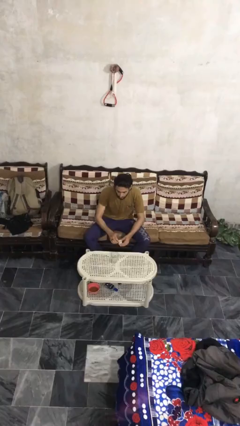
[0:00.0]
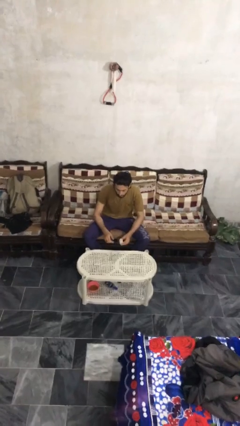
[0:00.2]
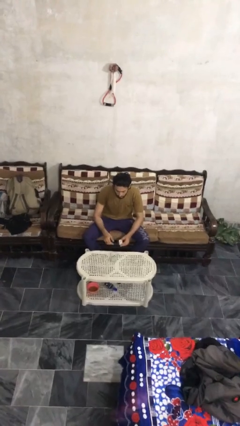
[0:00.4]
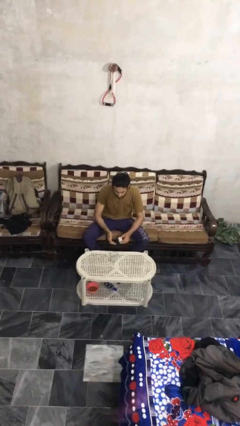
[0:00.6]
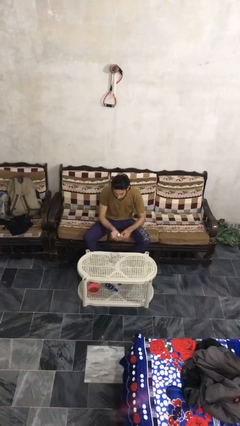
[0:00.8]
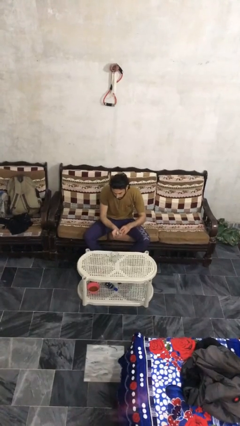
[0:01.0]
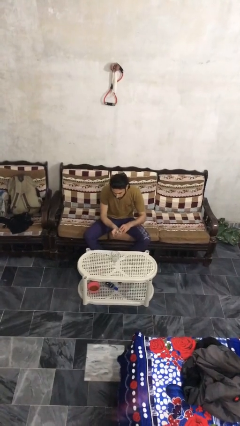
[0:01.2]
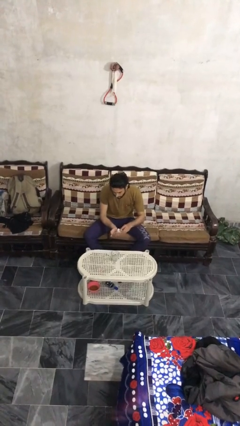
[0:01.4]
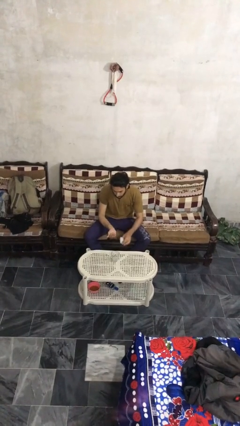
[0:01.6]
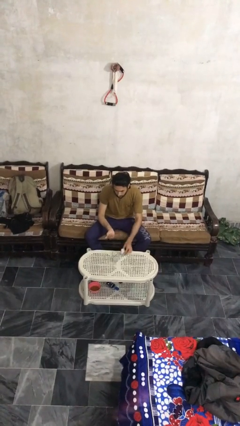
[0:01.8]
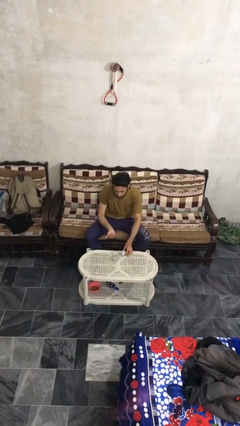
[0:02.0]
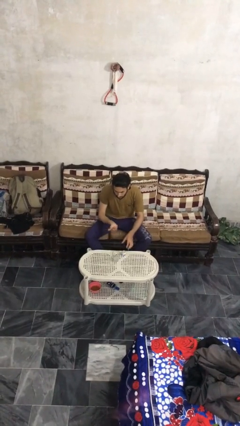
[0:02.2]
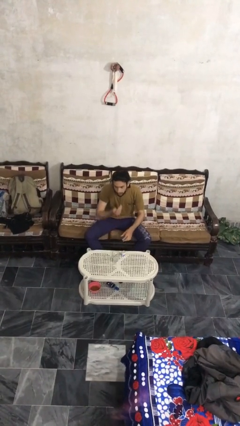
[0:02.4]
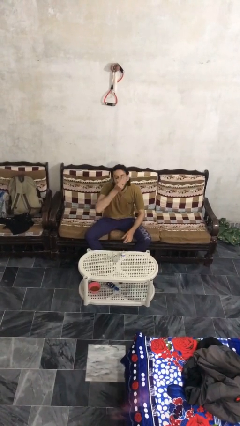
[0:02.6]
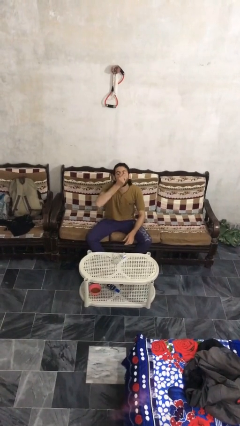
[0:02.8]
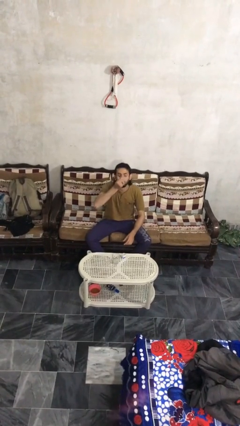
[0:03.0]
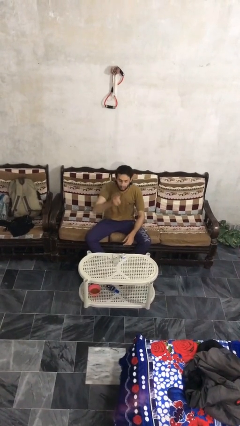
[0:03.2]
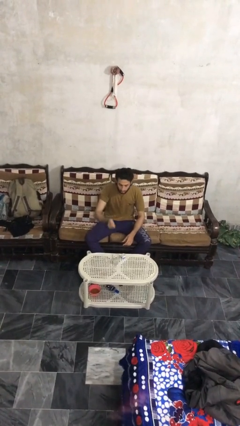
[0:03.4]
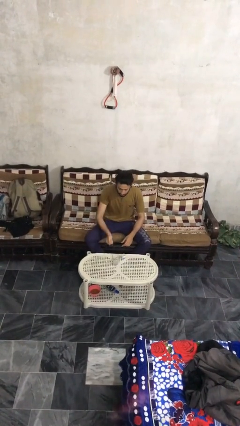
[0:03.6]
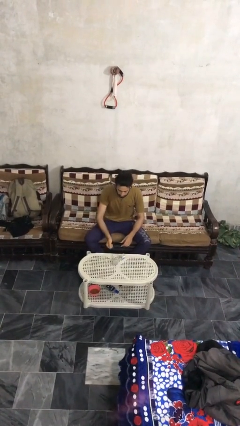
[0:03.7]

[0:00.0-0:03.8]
person takes medicine pills

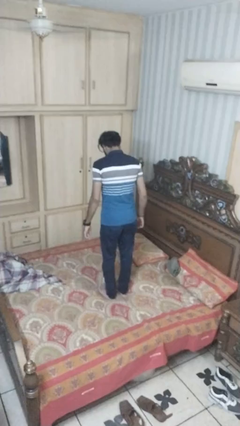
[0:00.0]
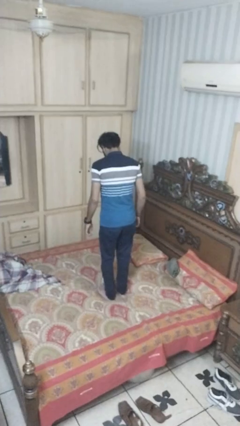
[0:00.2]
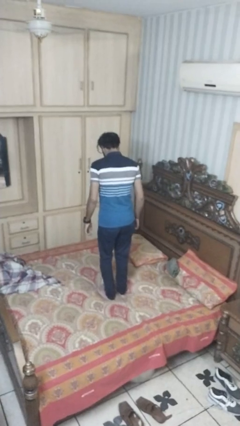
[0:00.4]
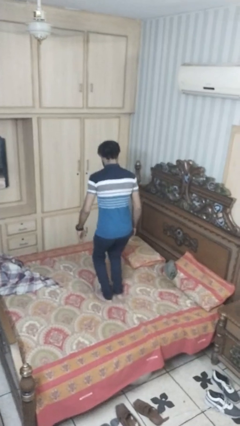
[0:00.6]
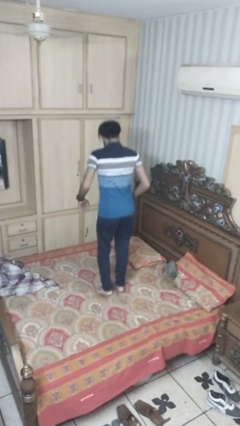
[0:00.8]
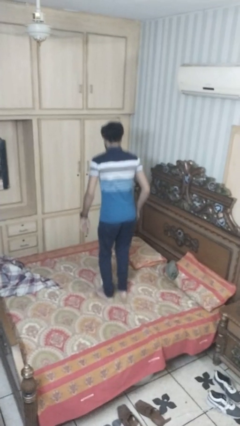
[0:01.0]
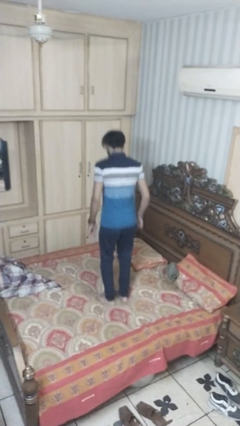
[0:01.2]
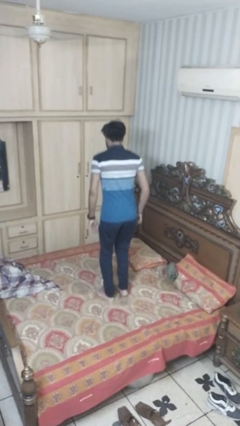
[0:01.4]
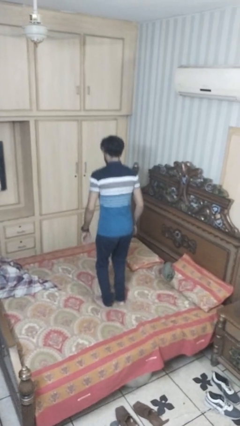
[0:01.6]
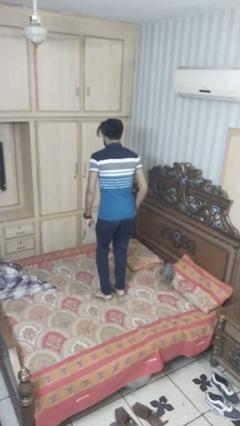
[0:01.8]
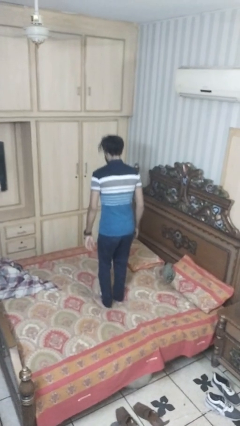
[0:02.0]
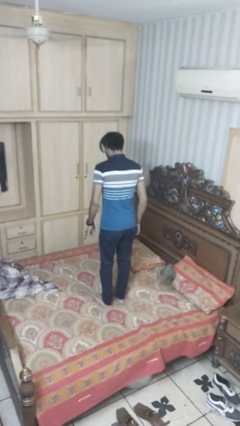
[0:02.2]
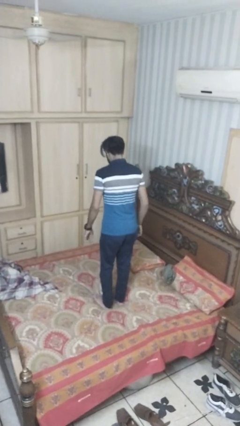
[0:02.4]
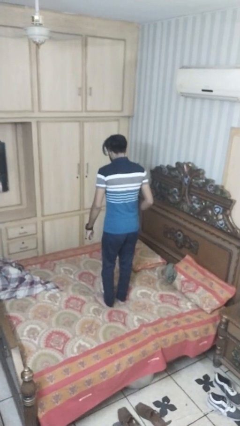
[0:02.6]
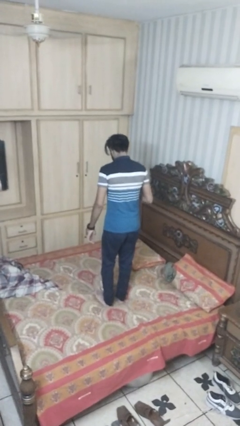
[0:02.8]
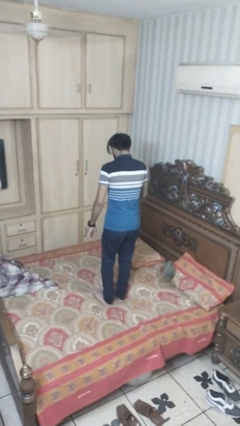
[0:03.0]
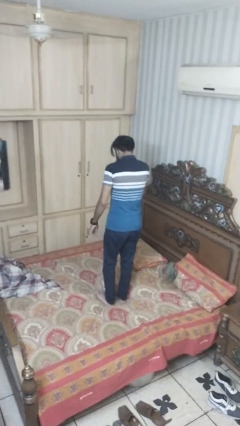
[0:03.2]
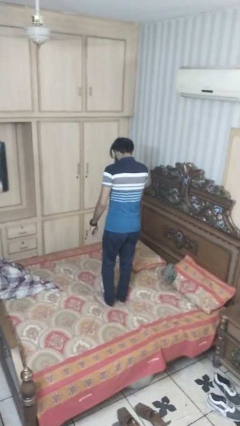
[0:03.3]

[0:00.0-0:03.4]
person jumps on bed

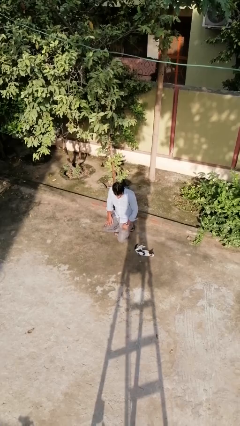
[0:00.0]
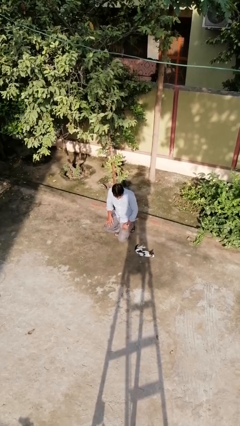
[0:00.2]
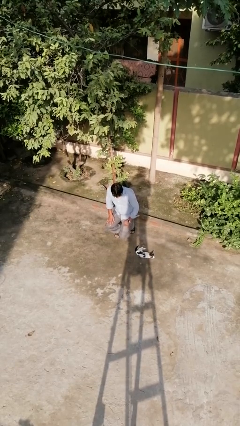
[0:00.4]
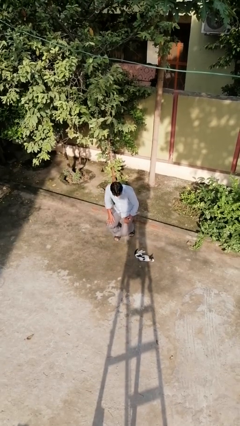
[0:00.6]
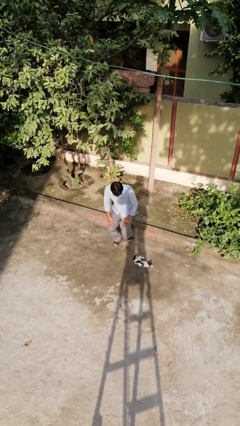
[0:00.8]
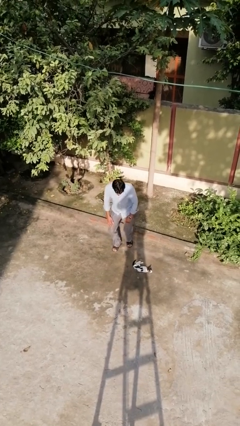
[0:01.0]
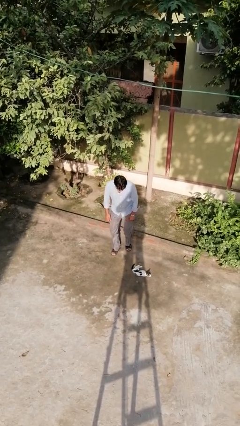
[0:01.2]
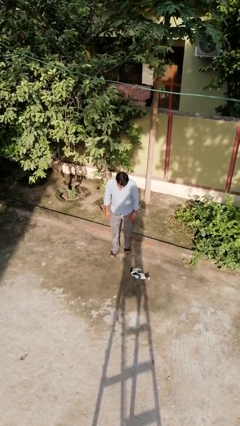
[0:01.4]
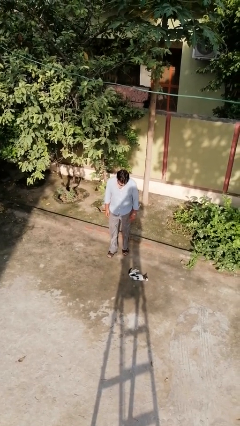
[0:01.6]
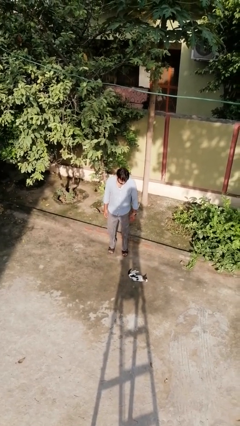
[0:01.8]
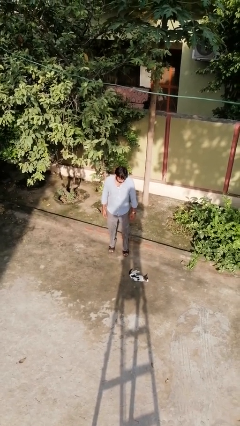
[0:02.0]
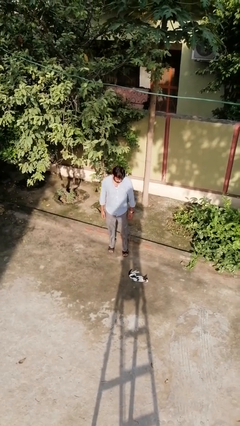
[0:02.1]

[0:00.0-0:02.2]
person stands up from floor

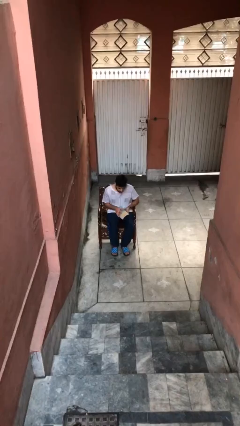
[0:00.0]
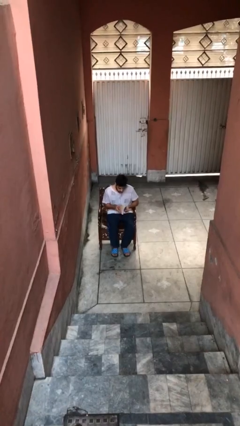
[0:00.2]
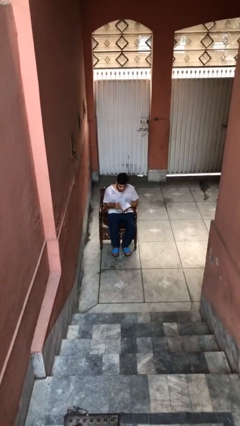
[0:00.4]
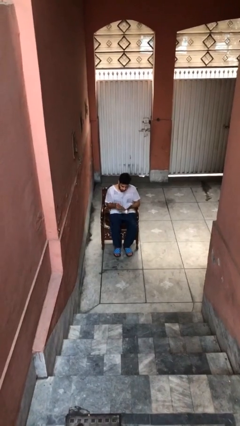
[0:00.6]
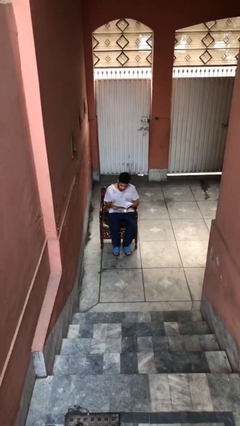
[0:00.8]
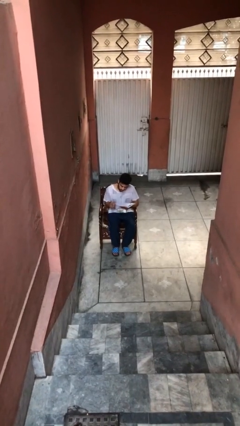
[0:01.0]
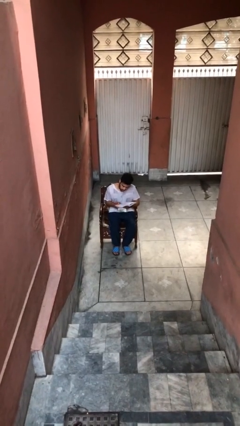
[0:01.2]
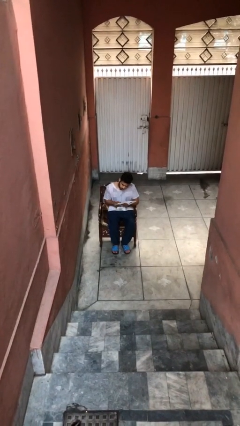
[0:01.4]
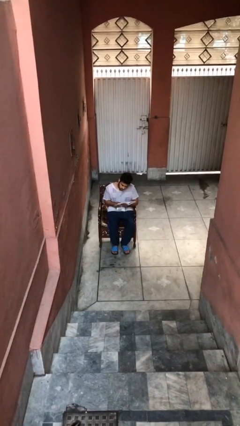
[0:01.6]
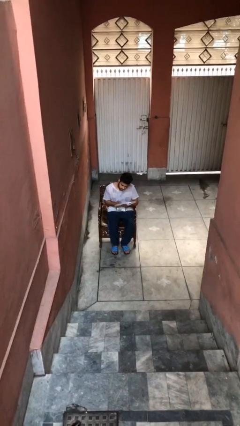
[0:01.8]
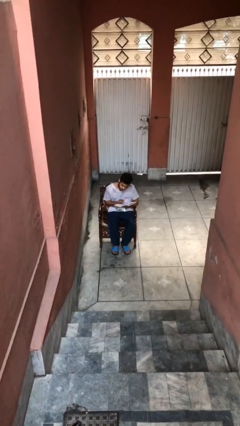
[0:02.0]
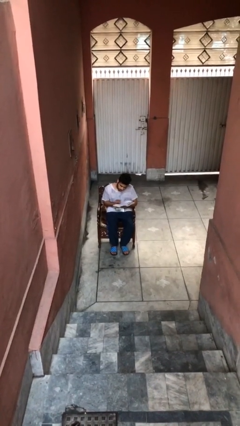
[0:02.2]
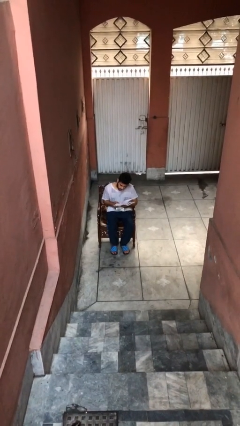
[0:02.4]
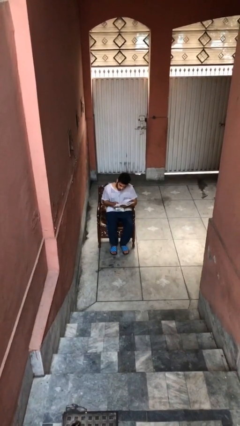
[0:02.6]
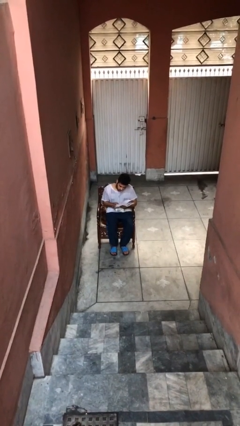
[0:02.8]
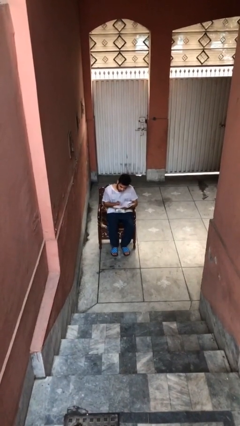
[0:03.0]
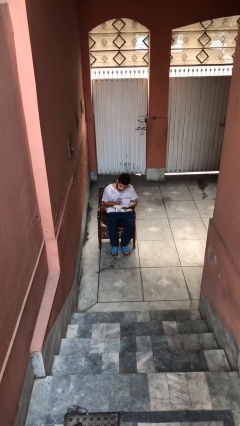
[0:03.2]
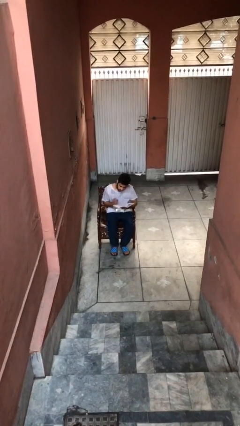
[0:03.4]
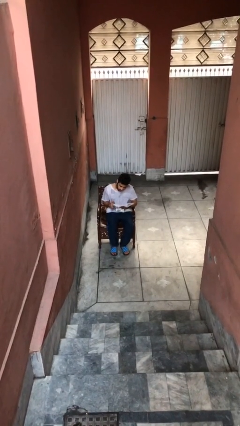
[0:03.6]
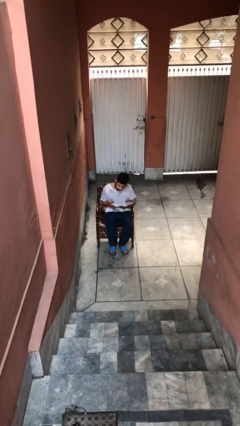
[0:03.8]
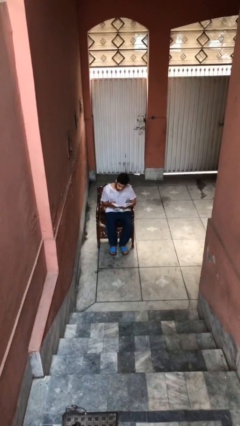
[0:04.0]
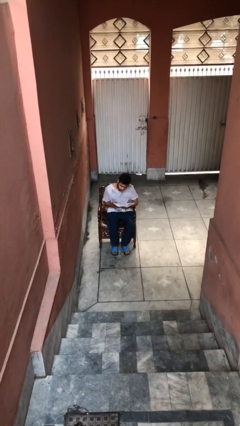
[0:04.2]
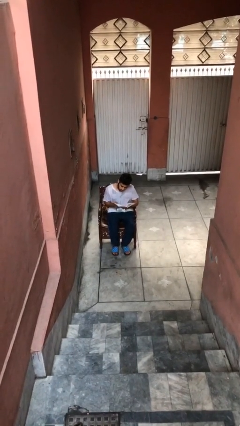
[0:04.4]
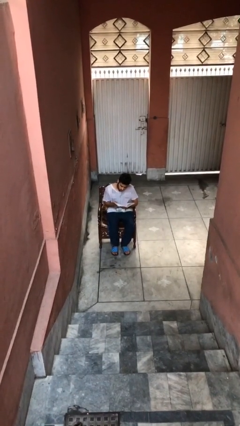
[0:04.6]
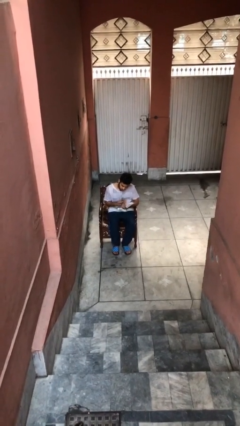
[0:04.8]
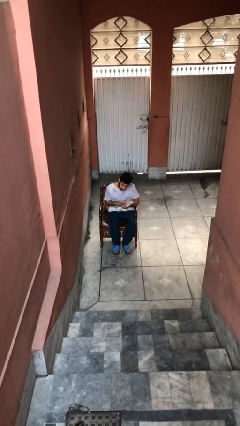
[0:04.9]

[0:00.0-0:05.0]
person reads document

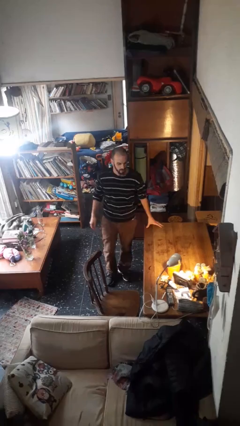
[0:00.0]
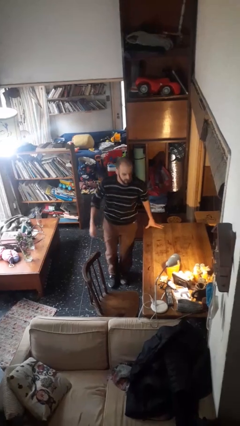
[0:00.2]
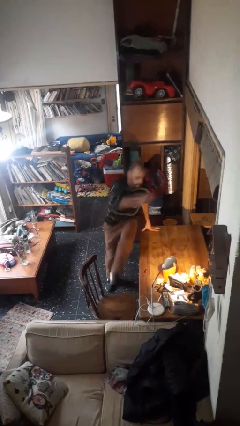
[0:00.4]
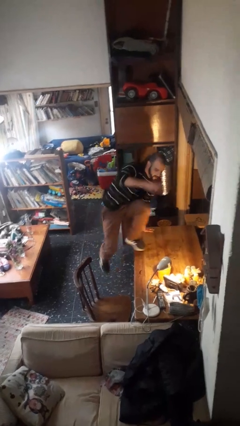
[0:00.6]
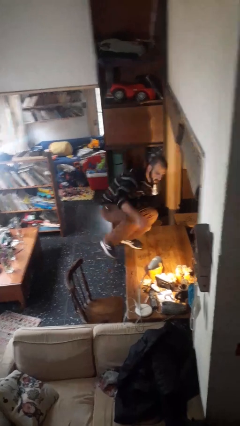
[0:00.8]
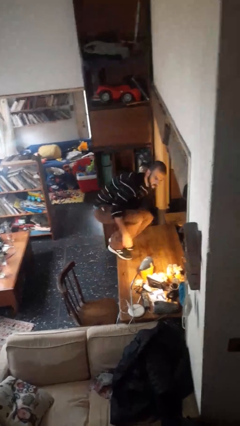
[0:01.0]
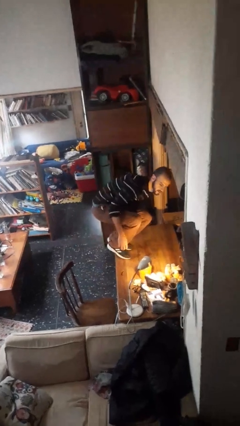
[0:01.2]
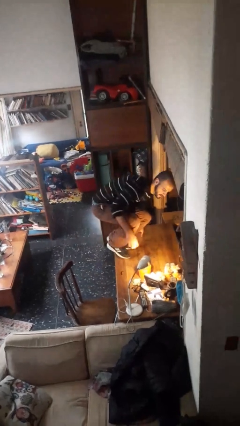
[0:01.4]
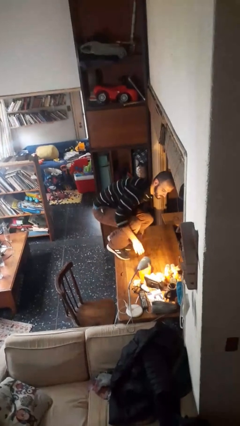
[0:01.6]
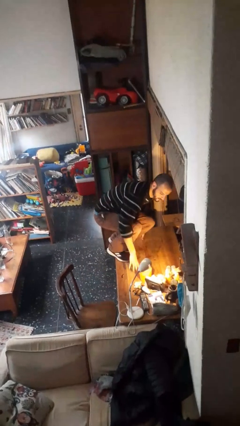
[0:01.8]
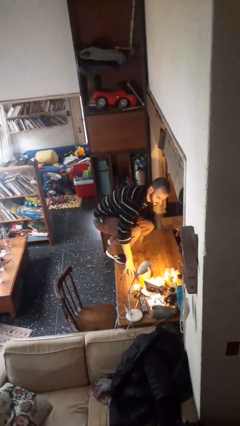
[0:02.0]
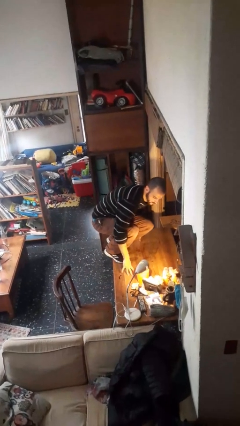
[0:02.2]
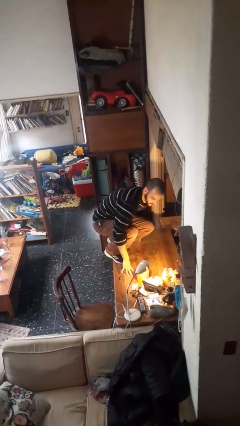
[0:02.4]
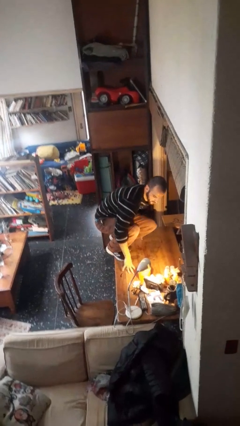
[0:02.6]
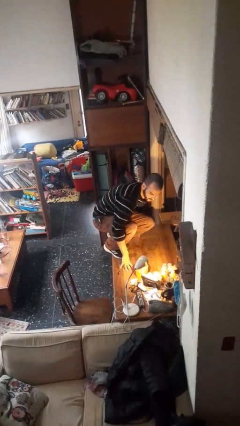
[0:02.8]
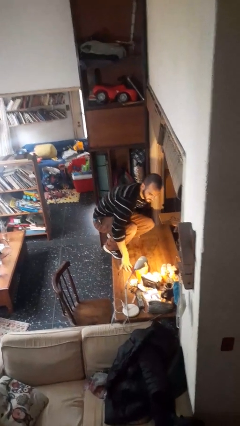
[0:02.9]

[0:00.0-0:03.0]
person climbs on table
